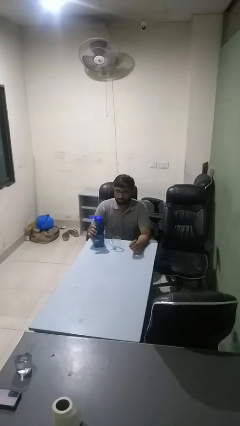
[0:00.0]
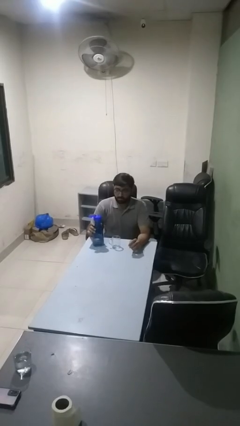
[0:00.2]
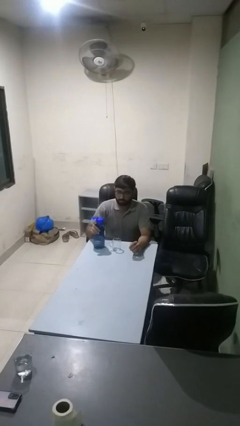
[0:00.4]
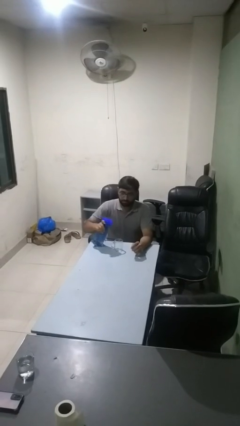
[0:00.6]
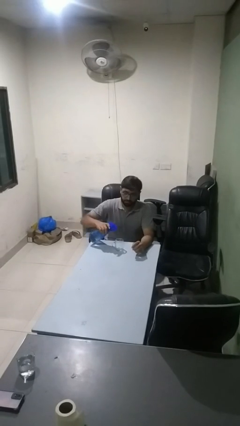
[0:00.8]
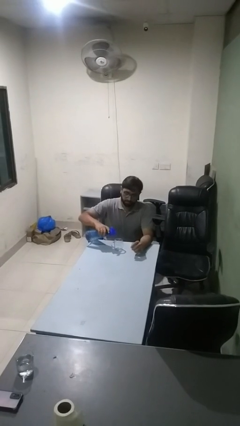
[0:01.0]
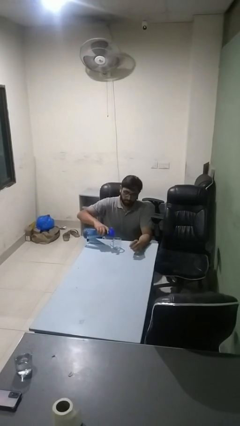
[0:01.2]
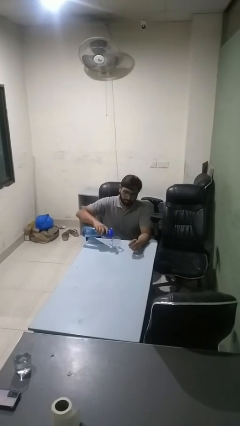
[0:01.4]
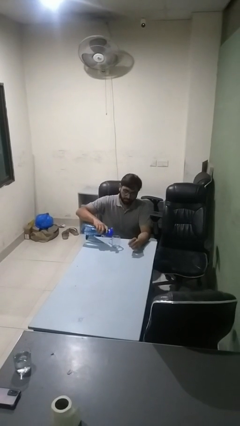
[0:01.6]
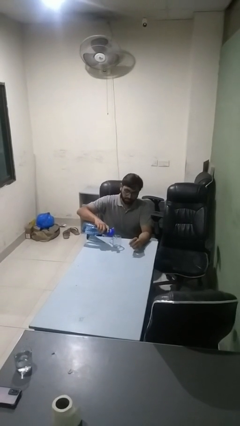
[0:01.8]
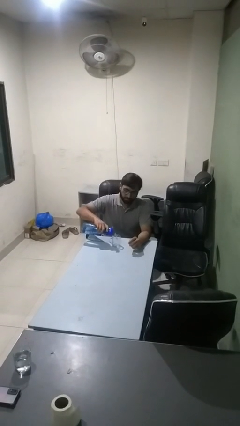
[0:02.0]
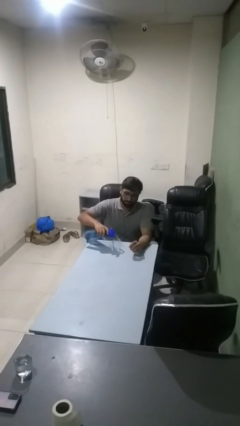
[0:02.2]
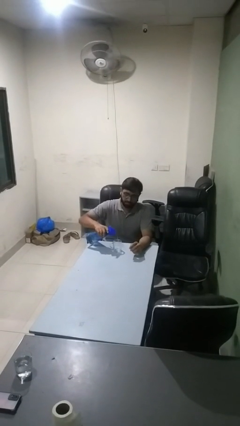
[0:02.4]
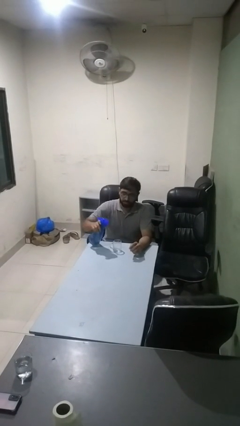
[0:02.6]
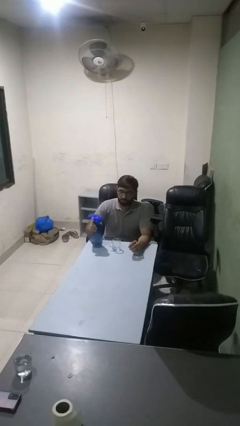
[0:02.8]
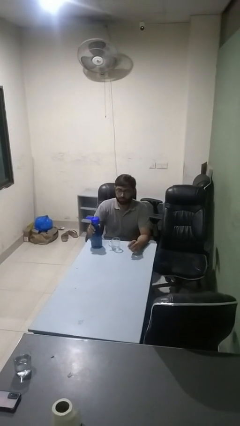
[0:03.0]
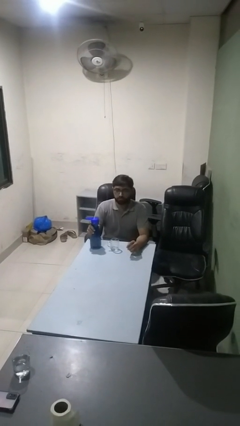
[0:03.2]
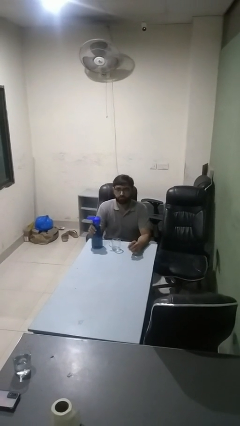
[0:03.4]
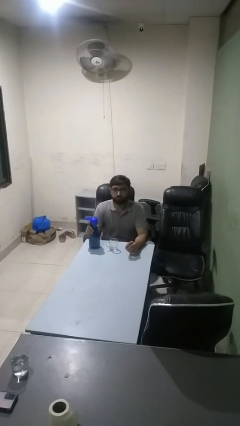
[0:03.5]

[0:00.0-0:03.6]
person pours liquid into cup

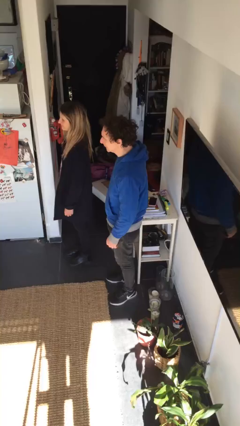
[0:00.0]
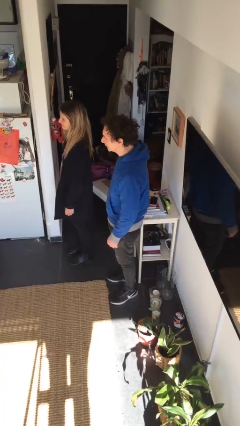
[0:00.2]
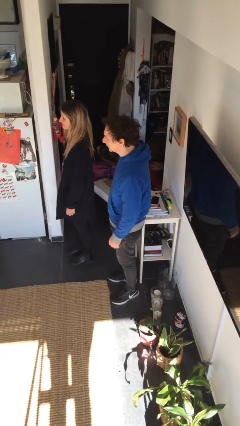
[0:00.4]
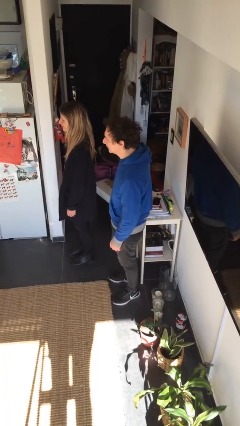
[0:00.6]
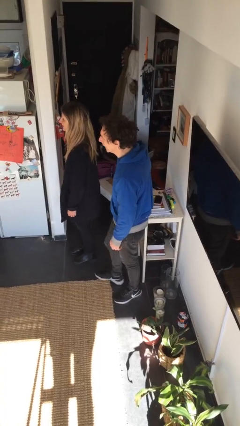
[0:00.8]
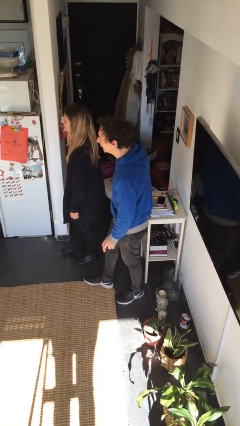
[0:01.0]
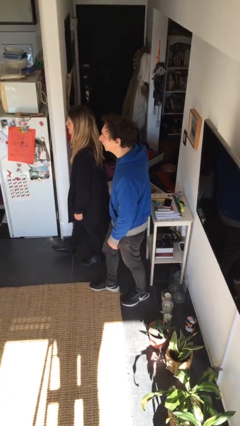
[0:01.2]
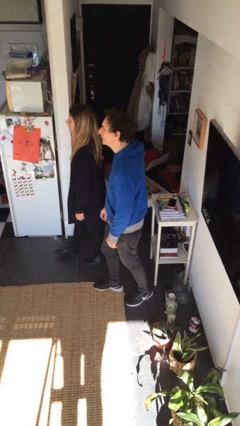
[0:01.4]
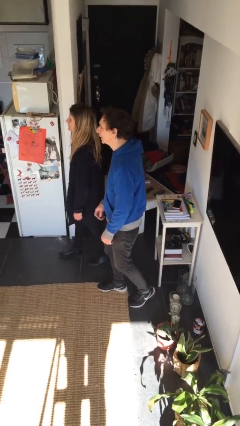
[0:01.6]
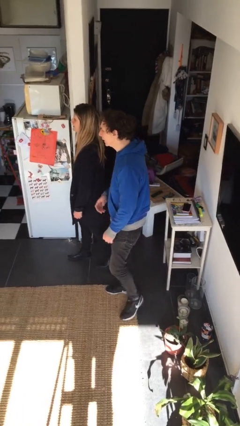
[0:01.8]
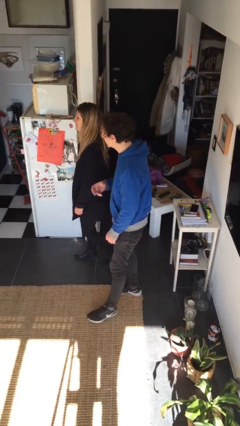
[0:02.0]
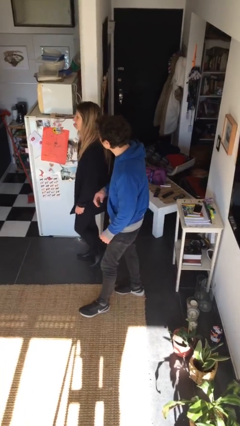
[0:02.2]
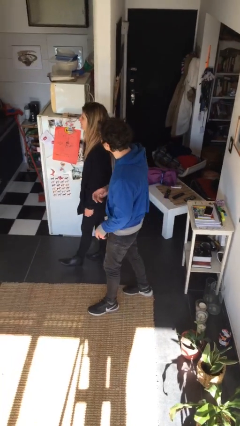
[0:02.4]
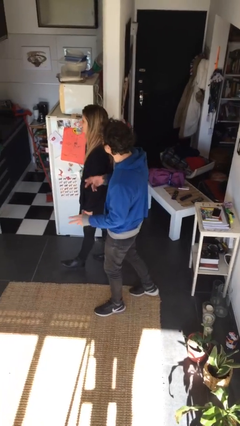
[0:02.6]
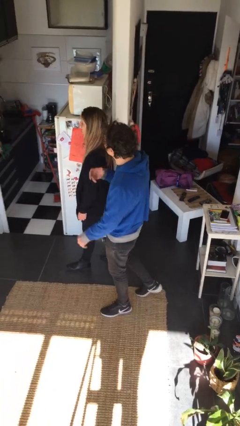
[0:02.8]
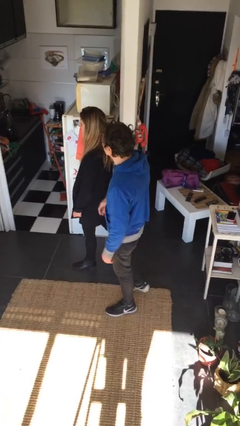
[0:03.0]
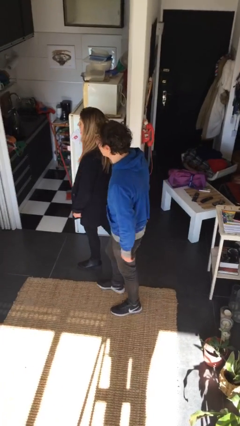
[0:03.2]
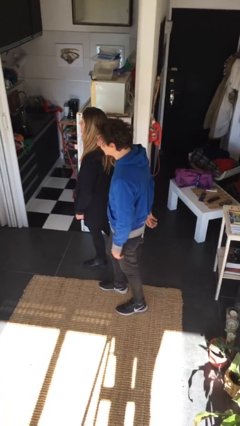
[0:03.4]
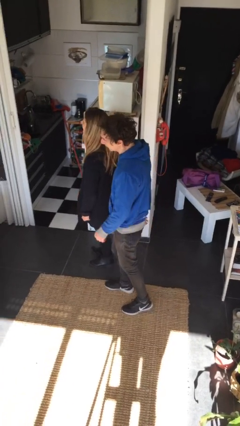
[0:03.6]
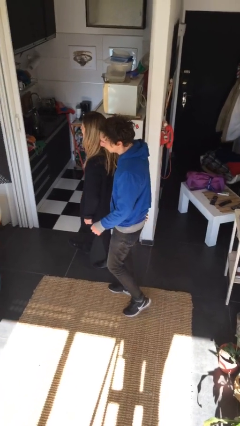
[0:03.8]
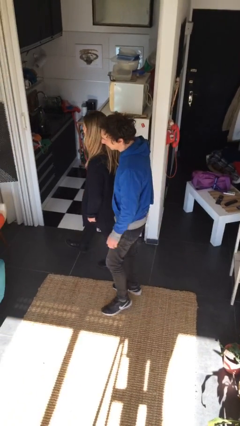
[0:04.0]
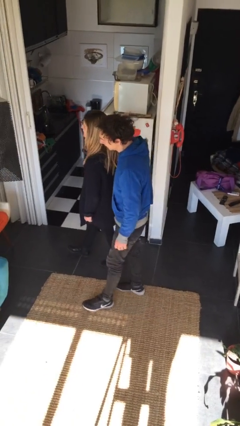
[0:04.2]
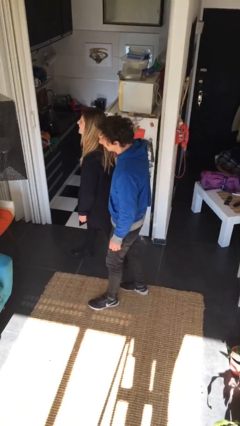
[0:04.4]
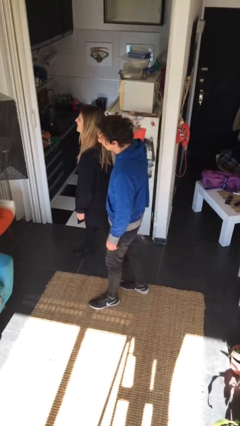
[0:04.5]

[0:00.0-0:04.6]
person talks to person

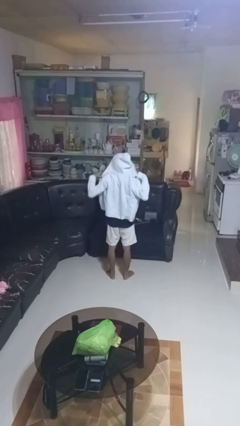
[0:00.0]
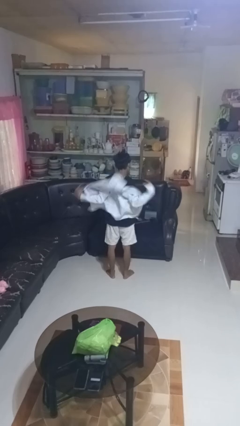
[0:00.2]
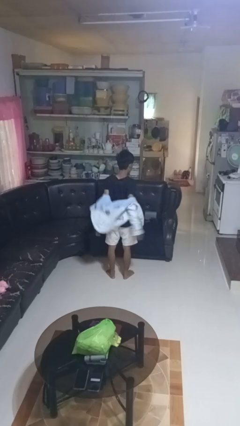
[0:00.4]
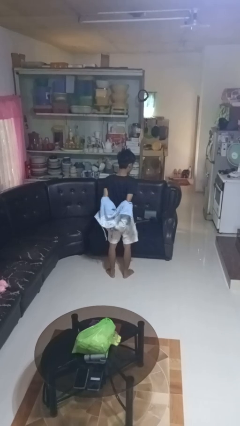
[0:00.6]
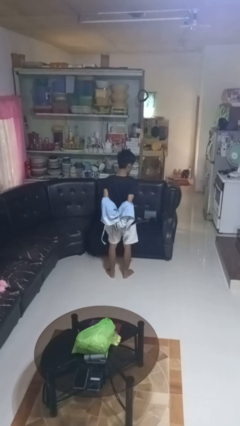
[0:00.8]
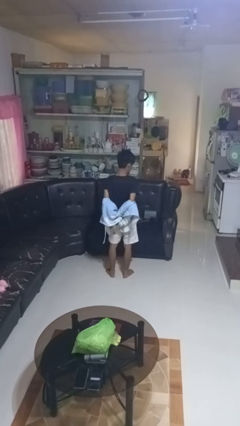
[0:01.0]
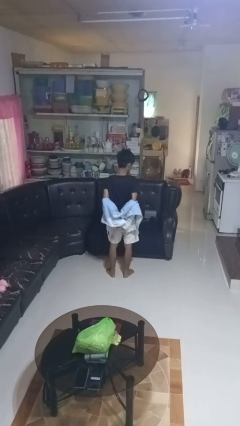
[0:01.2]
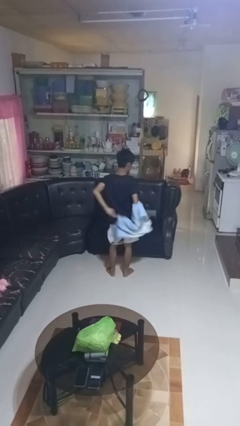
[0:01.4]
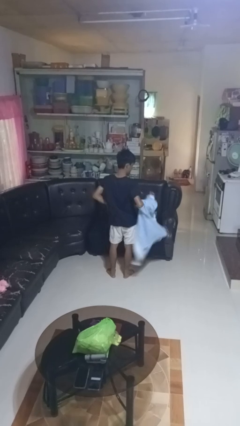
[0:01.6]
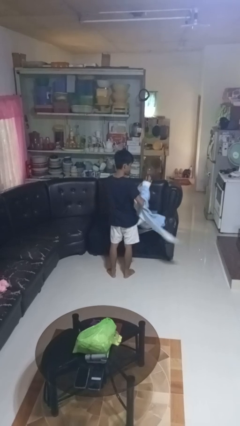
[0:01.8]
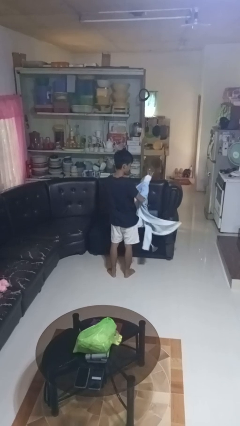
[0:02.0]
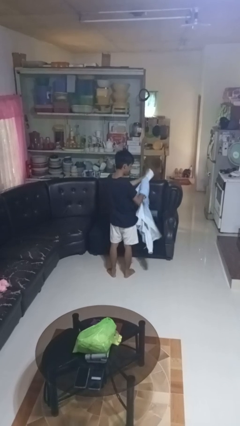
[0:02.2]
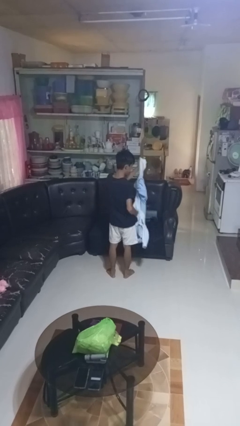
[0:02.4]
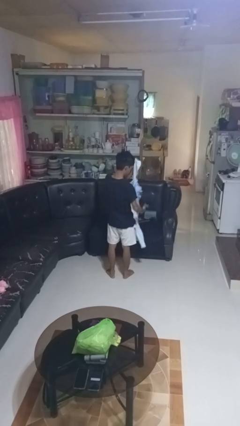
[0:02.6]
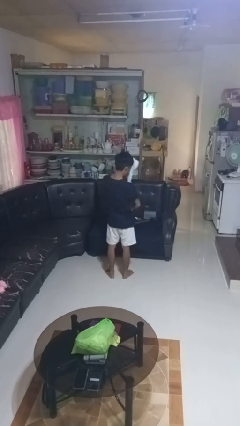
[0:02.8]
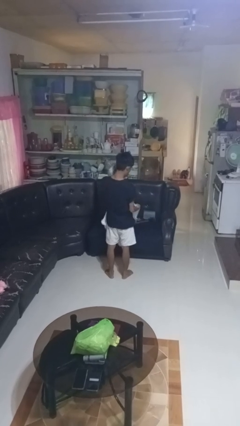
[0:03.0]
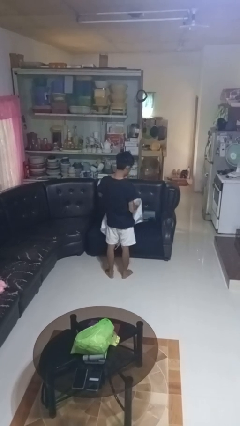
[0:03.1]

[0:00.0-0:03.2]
person takes off hoodie

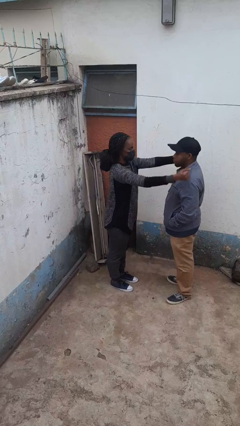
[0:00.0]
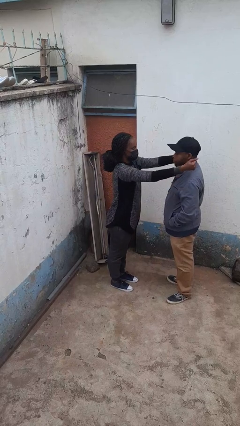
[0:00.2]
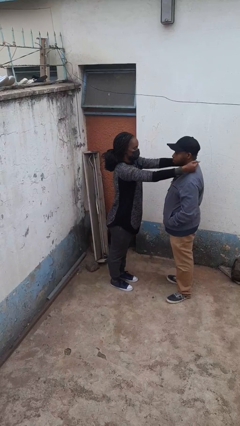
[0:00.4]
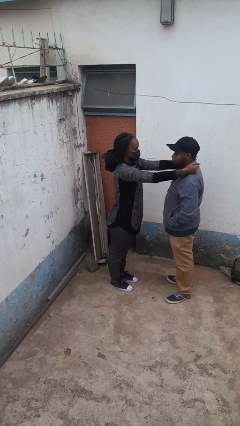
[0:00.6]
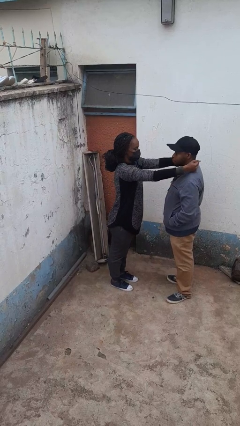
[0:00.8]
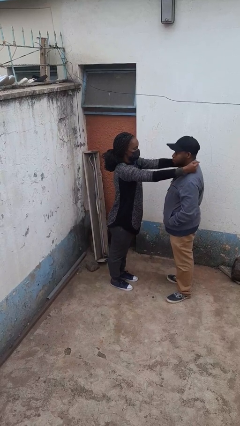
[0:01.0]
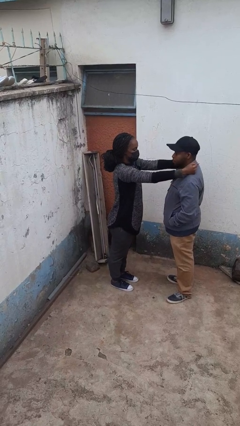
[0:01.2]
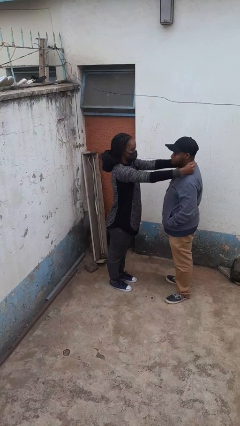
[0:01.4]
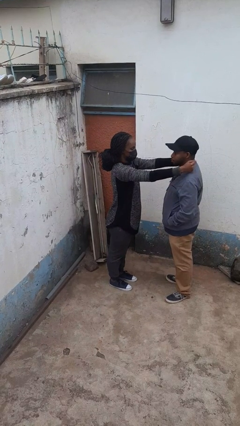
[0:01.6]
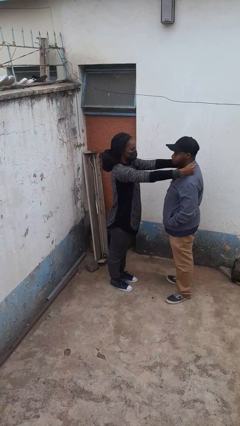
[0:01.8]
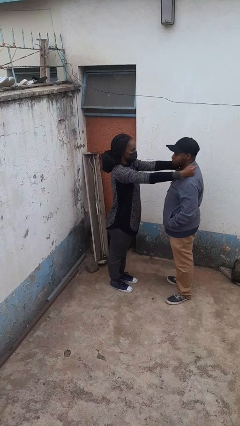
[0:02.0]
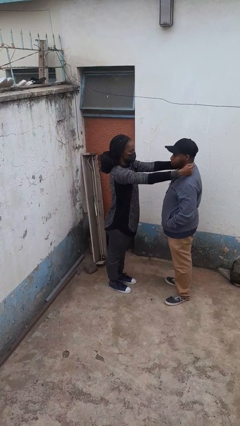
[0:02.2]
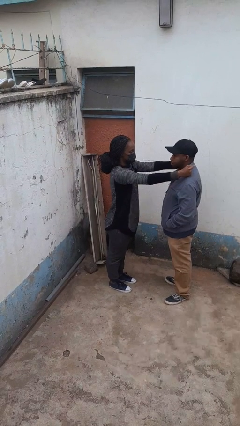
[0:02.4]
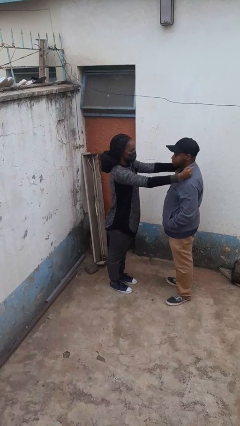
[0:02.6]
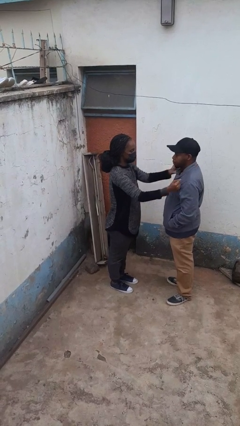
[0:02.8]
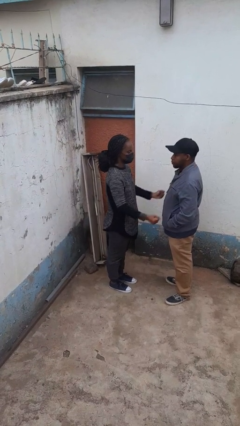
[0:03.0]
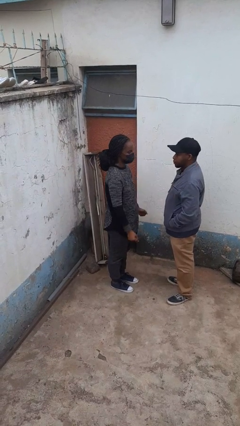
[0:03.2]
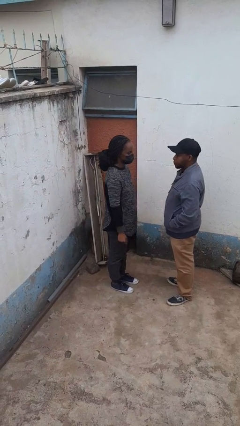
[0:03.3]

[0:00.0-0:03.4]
person pounds shoulders of person

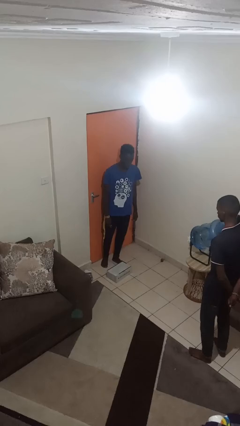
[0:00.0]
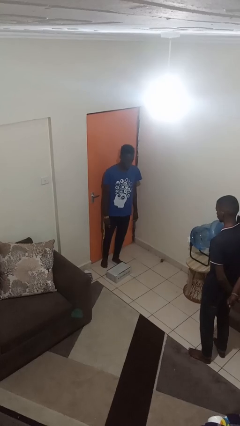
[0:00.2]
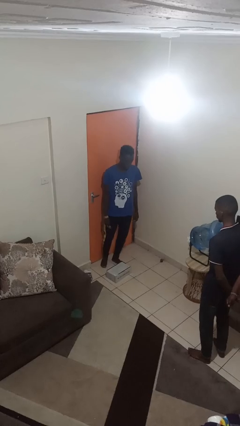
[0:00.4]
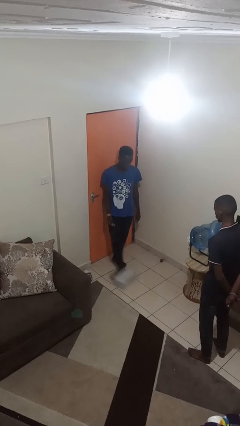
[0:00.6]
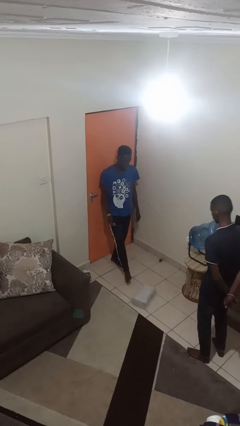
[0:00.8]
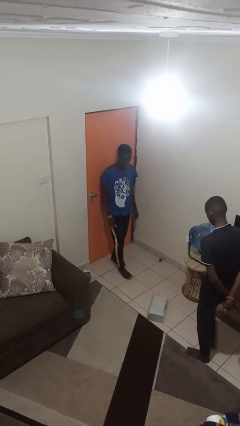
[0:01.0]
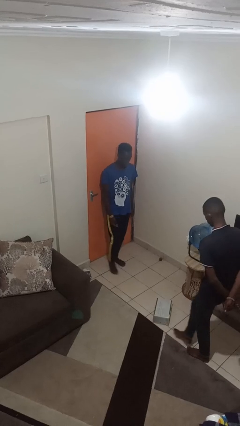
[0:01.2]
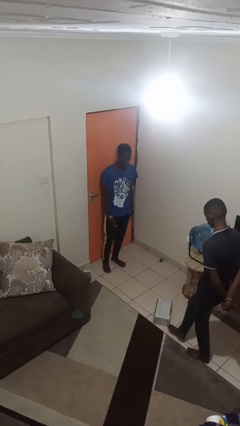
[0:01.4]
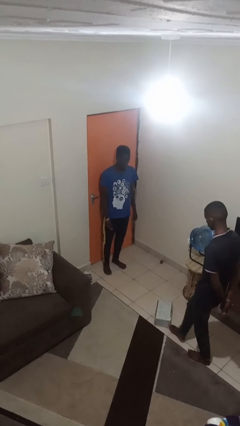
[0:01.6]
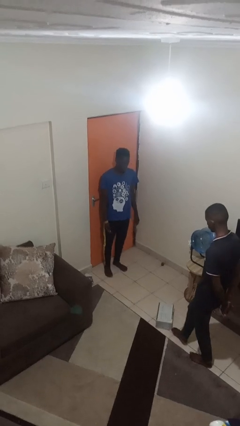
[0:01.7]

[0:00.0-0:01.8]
person kicks object to person

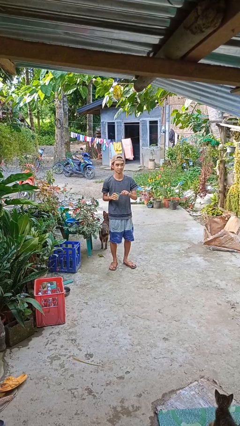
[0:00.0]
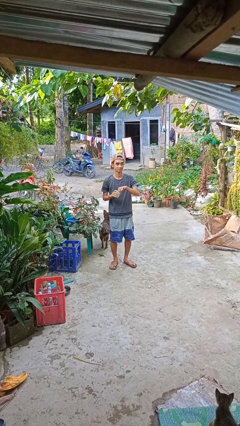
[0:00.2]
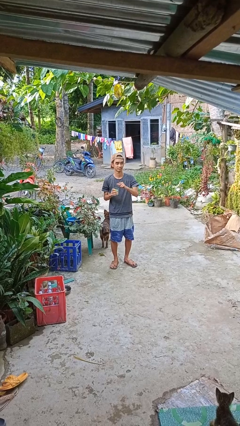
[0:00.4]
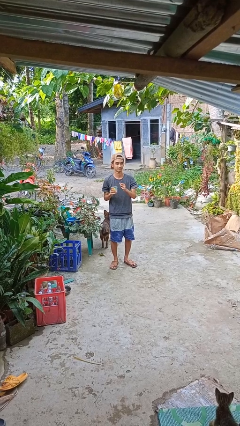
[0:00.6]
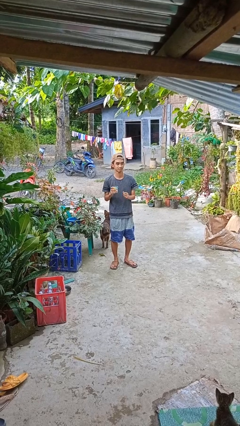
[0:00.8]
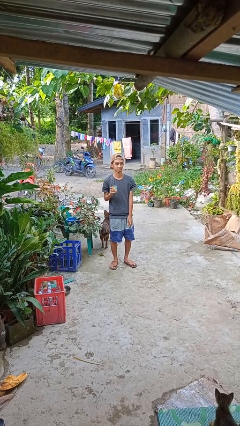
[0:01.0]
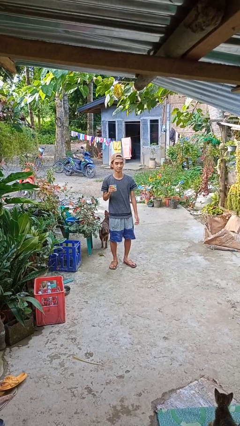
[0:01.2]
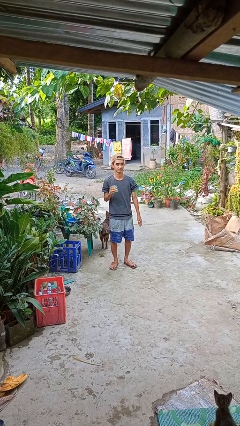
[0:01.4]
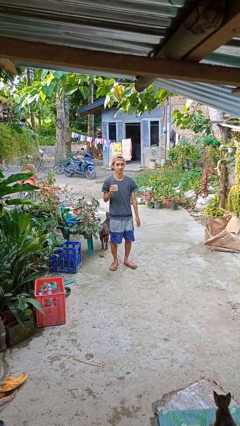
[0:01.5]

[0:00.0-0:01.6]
person opens beverage can
